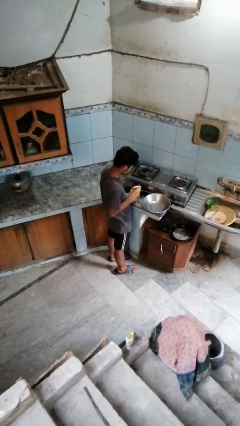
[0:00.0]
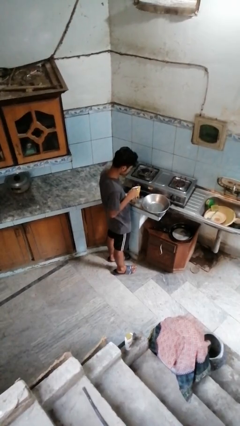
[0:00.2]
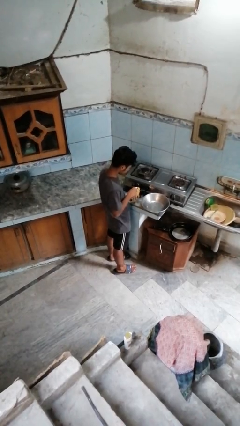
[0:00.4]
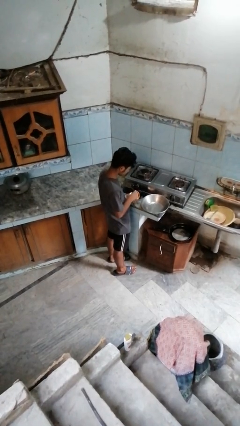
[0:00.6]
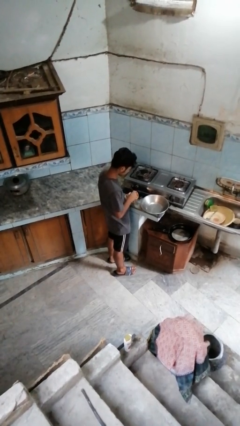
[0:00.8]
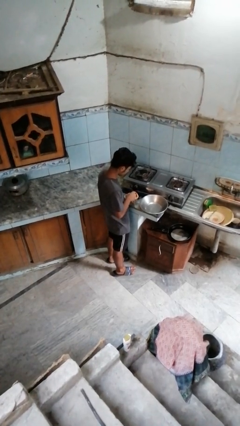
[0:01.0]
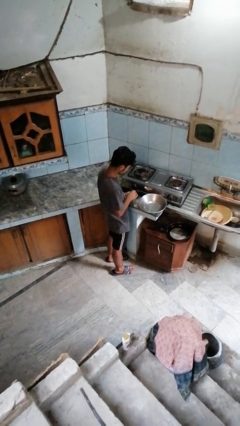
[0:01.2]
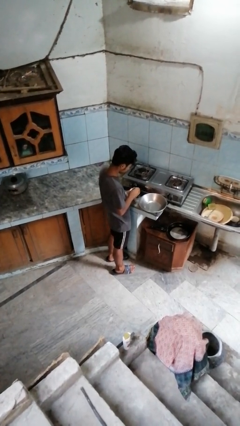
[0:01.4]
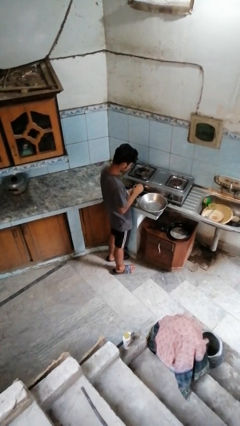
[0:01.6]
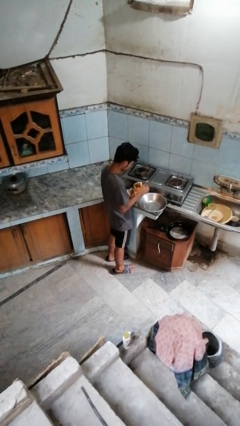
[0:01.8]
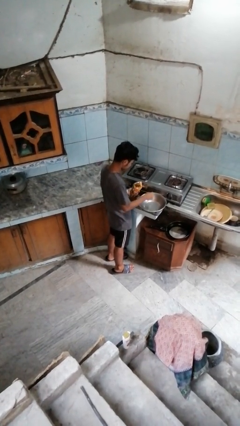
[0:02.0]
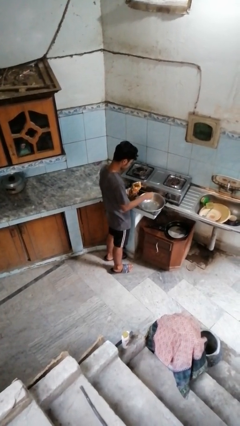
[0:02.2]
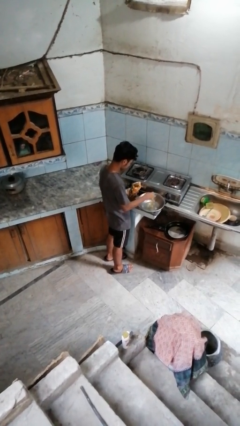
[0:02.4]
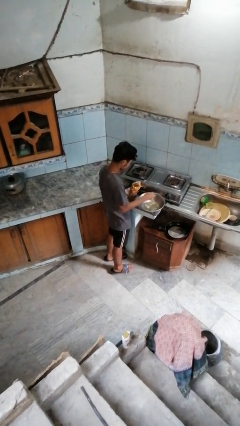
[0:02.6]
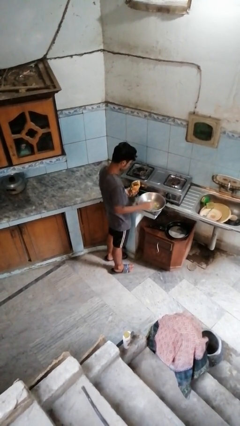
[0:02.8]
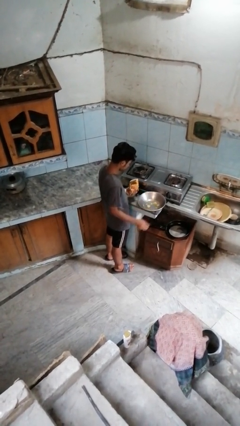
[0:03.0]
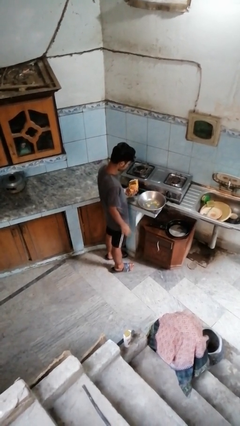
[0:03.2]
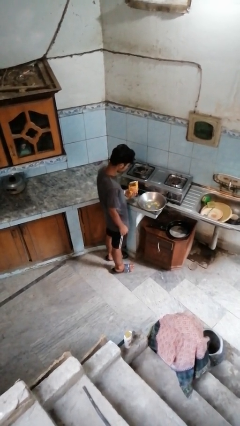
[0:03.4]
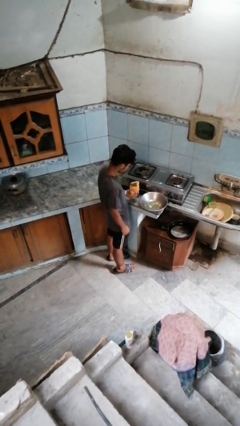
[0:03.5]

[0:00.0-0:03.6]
person pours into bowl

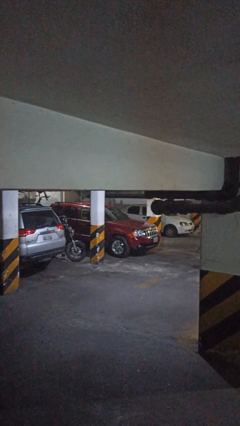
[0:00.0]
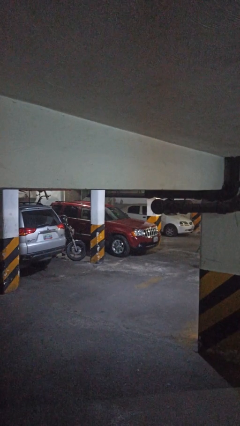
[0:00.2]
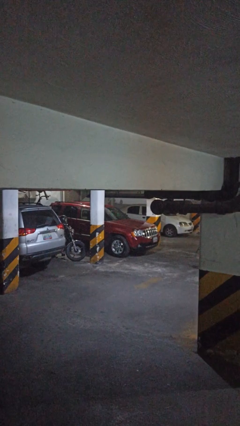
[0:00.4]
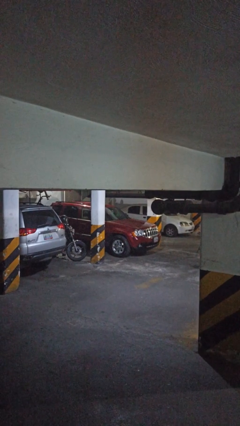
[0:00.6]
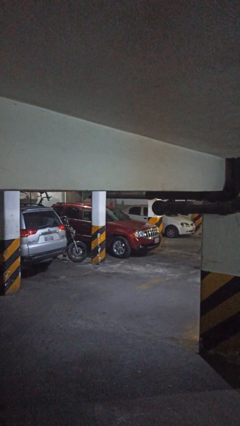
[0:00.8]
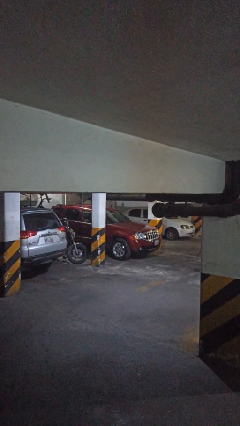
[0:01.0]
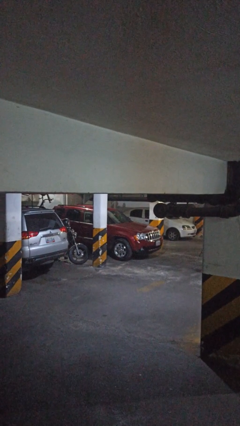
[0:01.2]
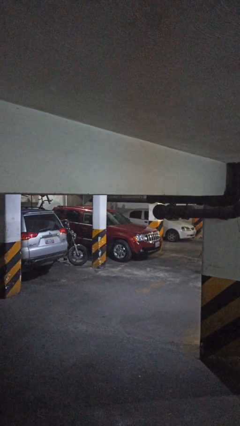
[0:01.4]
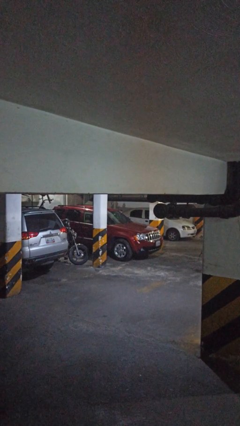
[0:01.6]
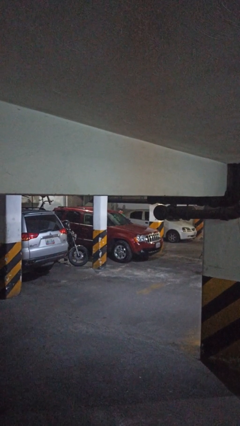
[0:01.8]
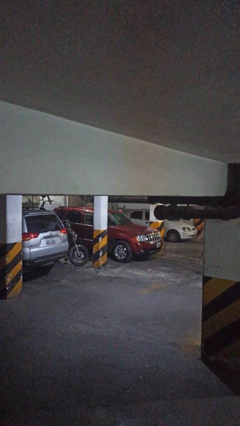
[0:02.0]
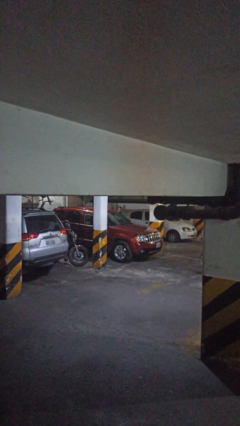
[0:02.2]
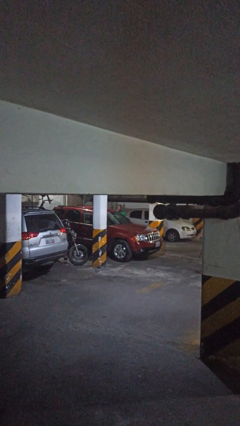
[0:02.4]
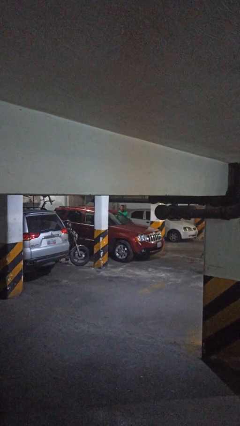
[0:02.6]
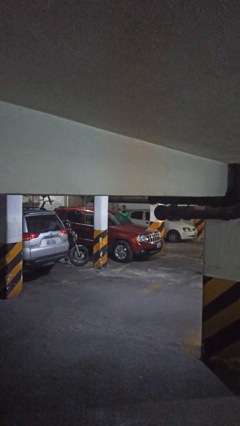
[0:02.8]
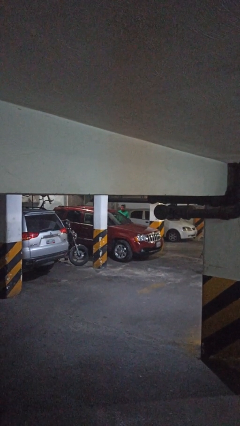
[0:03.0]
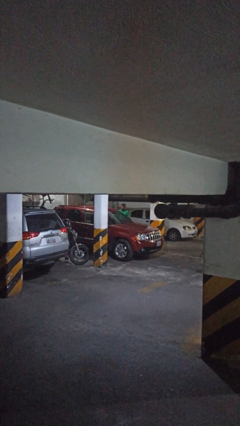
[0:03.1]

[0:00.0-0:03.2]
person exits car

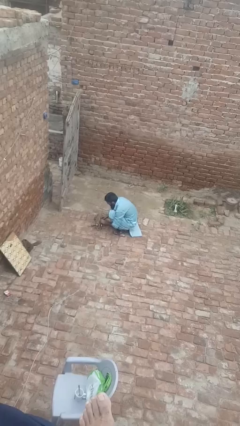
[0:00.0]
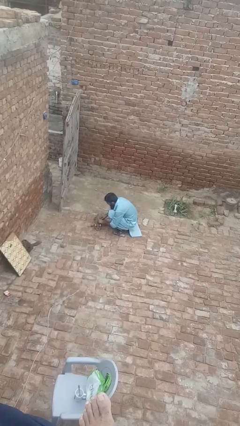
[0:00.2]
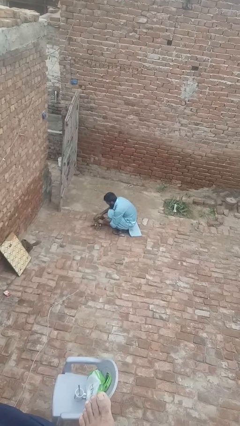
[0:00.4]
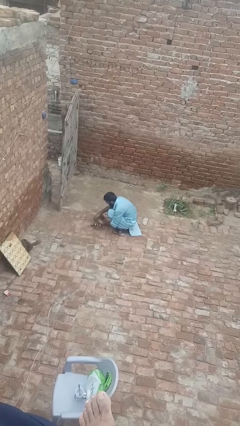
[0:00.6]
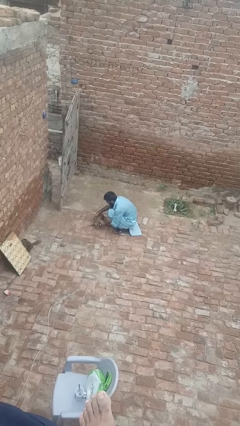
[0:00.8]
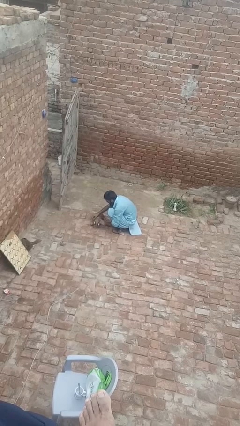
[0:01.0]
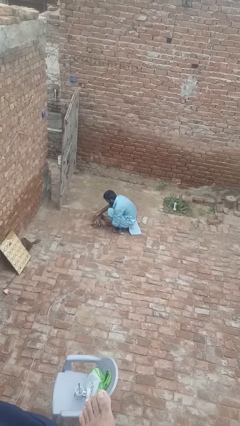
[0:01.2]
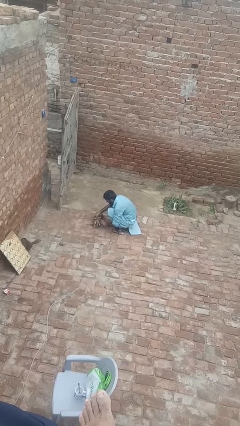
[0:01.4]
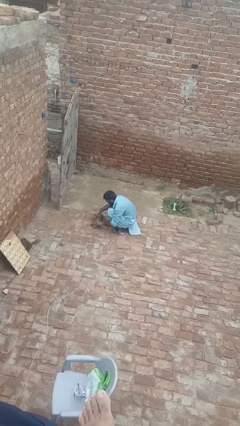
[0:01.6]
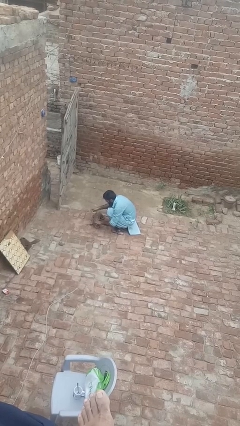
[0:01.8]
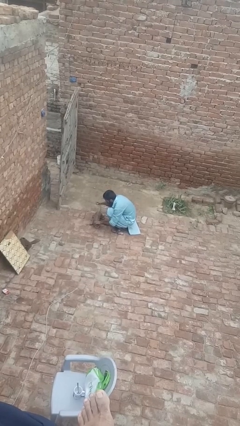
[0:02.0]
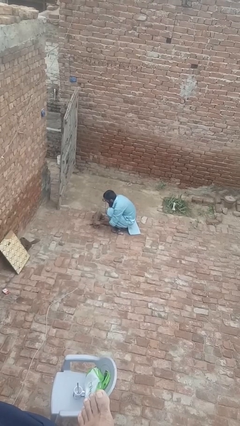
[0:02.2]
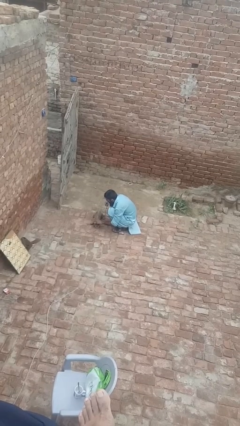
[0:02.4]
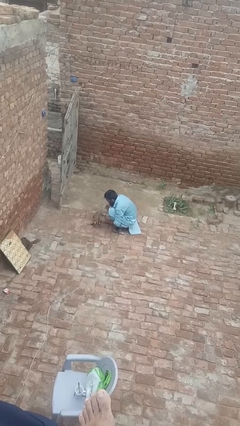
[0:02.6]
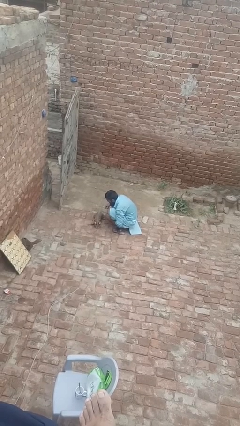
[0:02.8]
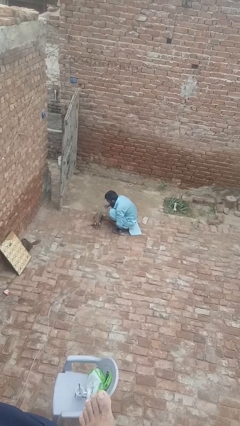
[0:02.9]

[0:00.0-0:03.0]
person unattaches leash from dog

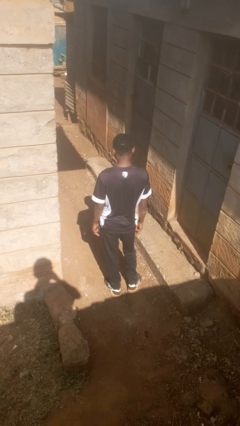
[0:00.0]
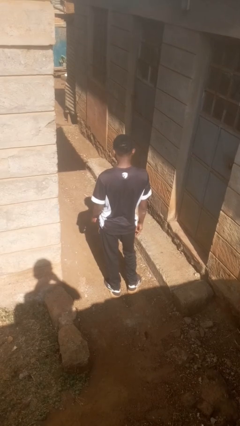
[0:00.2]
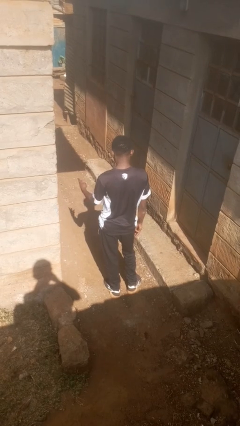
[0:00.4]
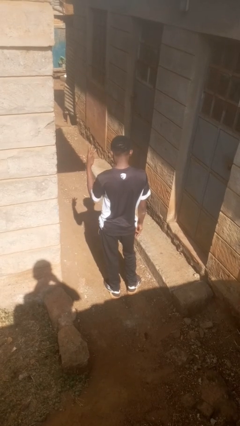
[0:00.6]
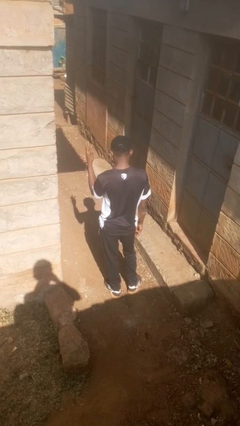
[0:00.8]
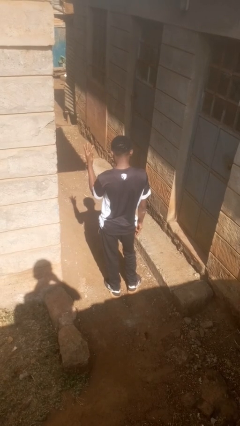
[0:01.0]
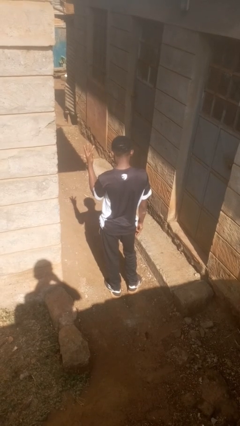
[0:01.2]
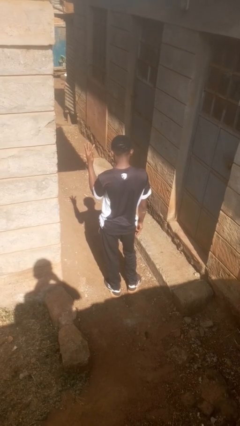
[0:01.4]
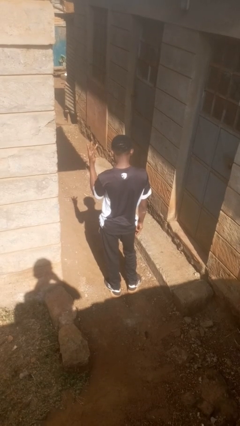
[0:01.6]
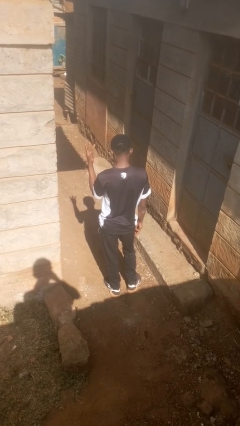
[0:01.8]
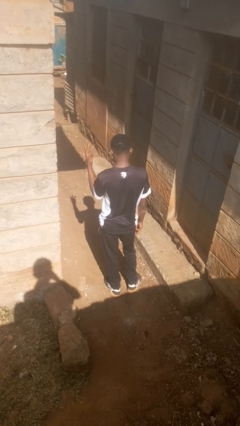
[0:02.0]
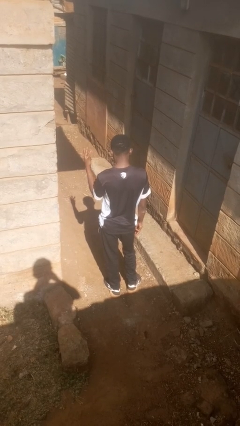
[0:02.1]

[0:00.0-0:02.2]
person gestures number three

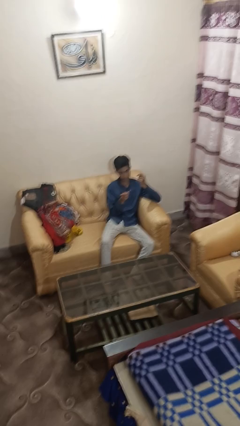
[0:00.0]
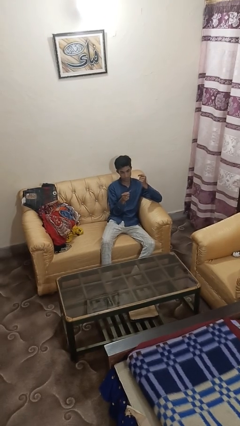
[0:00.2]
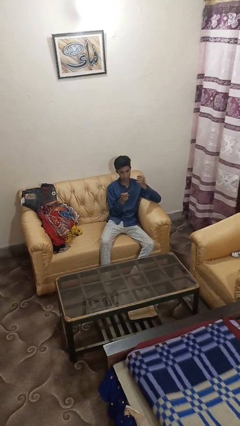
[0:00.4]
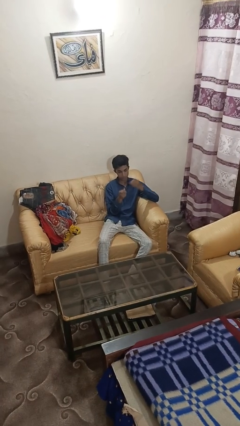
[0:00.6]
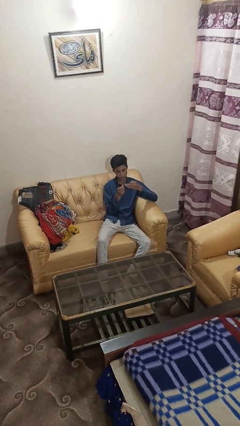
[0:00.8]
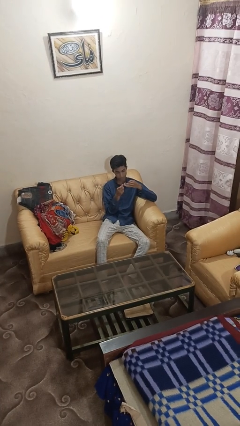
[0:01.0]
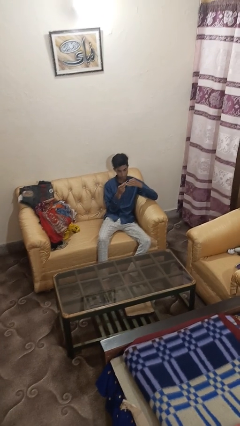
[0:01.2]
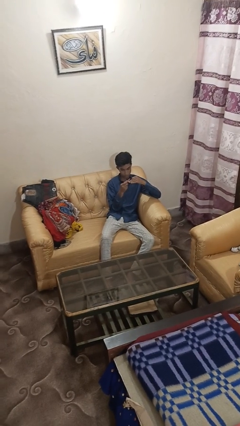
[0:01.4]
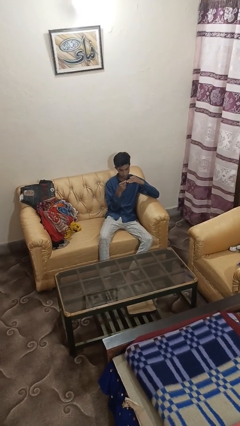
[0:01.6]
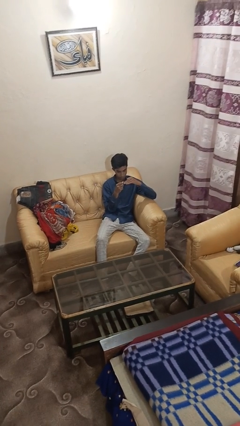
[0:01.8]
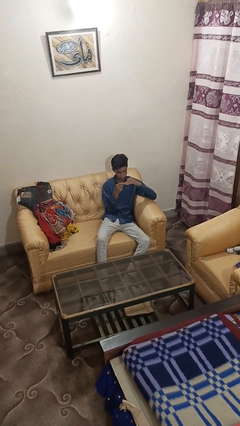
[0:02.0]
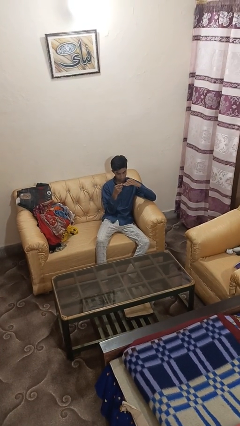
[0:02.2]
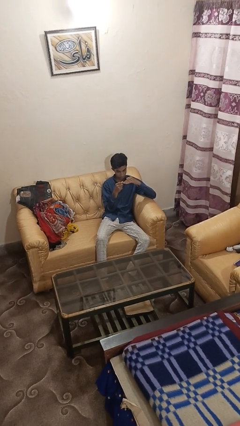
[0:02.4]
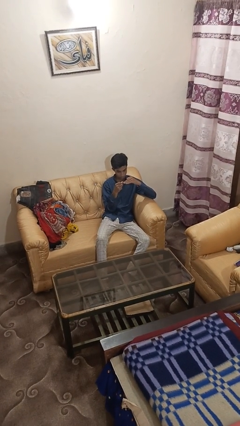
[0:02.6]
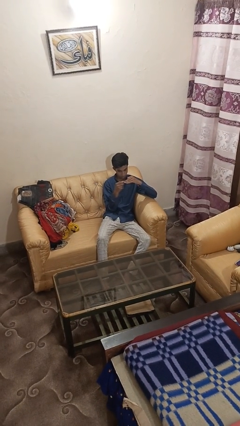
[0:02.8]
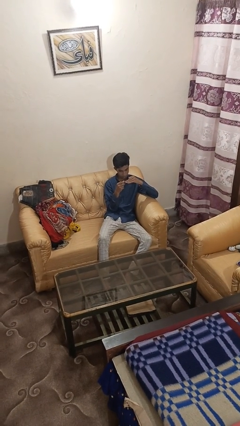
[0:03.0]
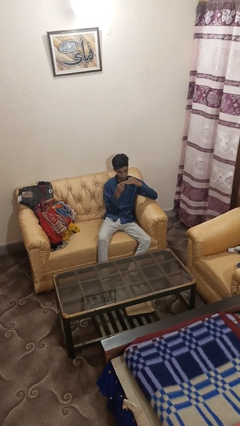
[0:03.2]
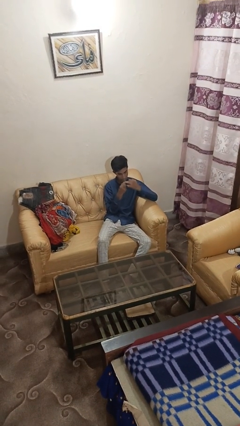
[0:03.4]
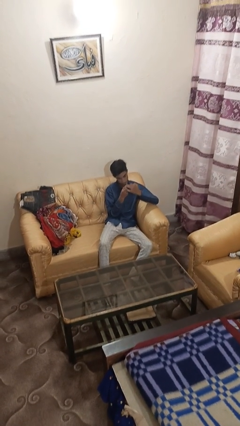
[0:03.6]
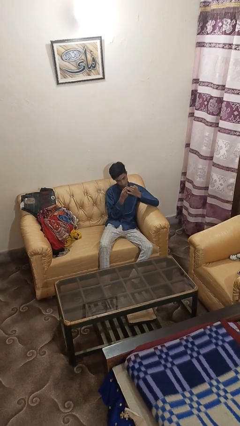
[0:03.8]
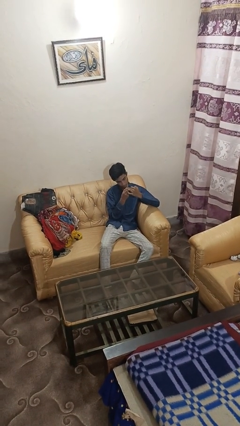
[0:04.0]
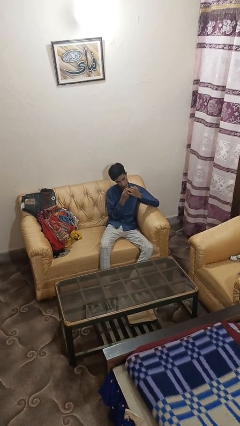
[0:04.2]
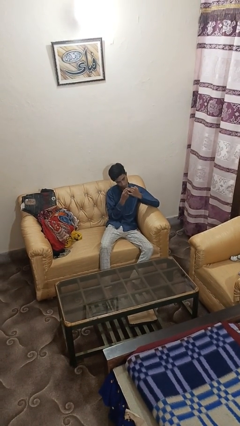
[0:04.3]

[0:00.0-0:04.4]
person files fingernails

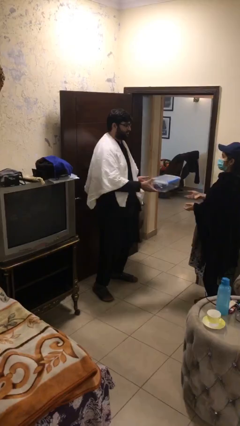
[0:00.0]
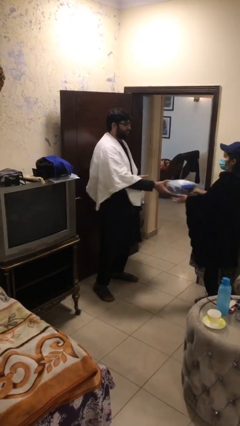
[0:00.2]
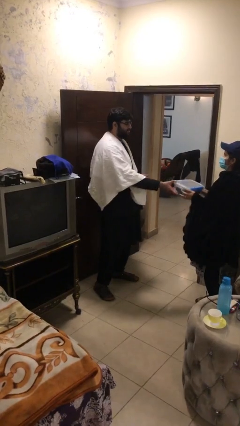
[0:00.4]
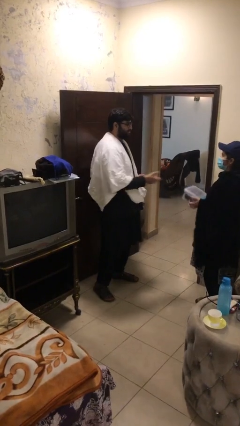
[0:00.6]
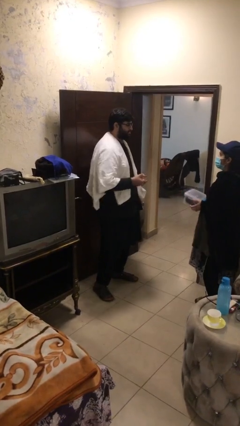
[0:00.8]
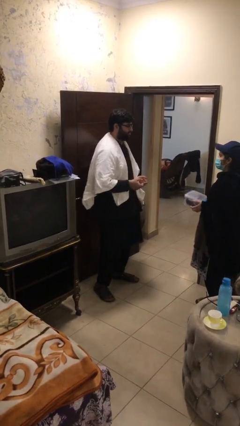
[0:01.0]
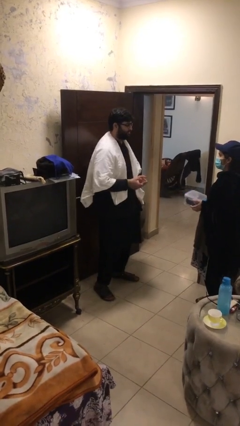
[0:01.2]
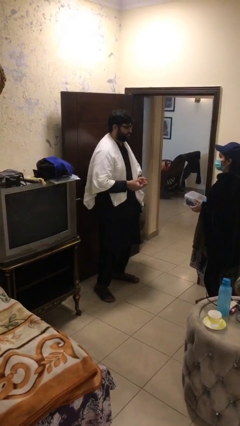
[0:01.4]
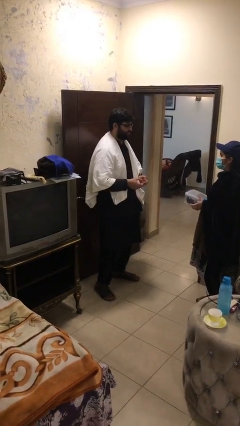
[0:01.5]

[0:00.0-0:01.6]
person transfers object to person
